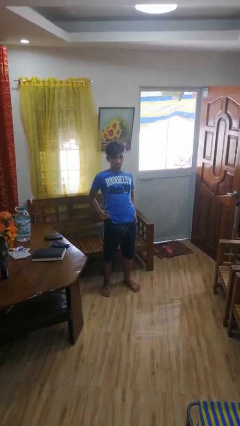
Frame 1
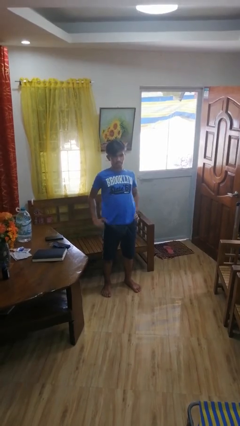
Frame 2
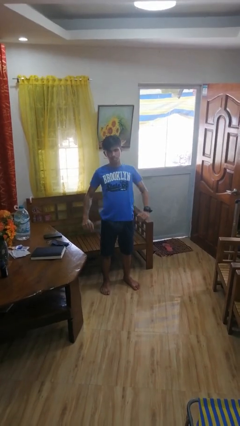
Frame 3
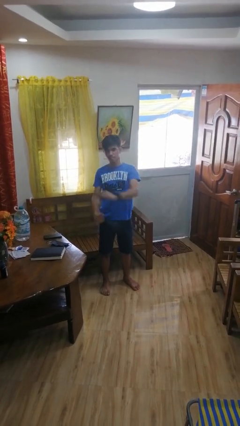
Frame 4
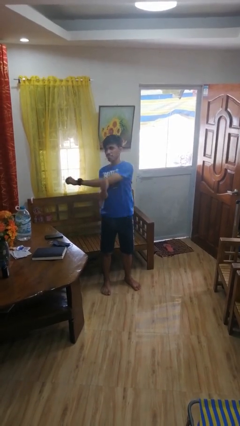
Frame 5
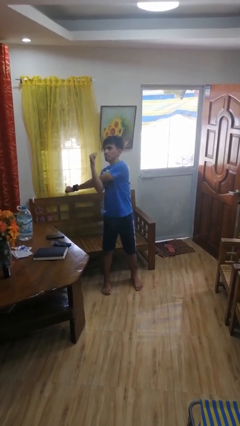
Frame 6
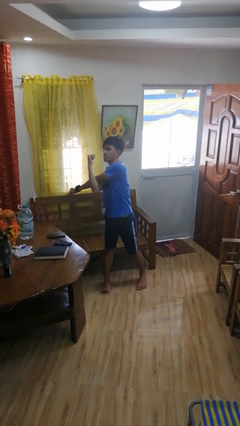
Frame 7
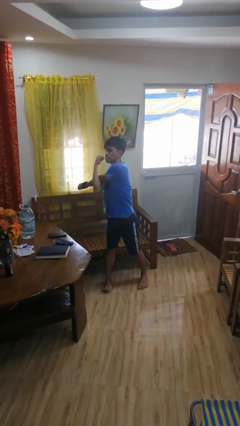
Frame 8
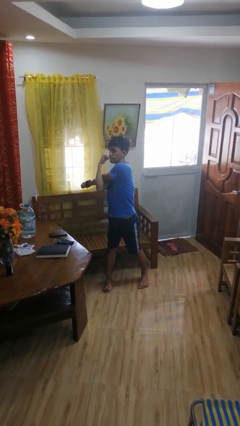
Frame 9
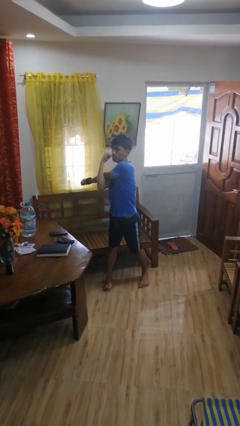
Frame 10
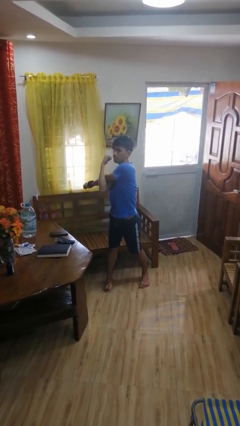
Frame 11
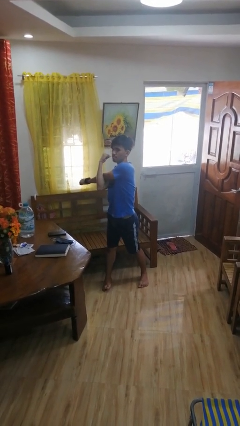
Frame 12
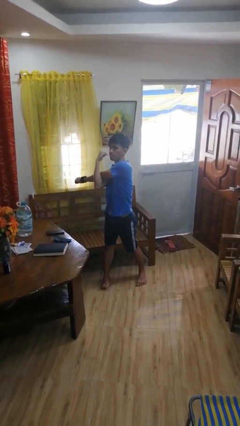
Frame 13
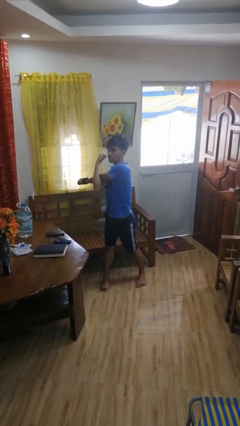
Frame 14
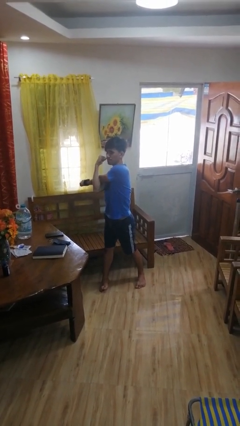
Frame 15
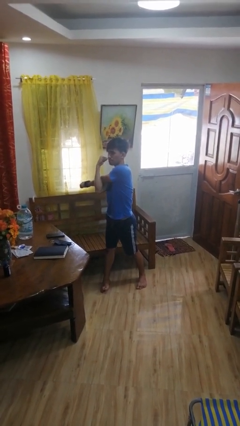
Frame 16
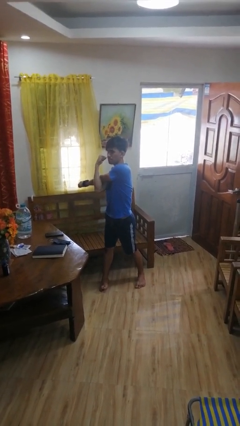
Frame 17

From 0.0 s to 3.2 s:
person stretches arms to side

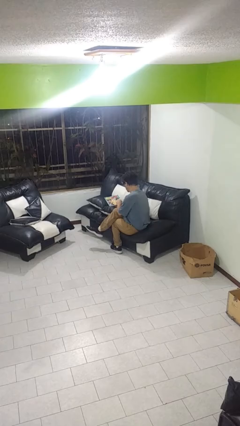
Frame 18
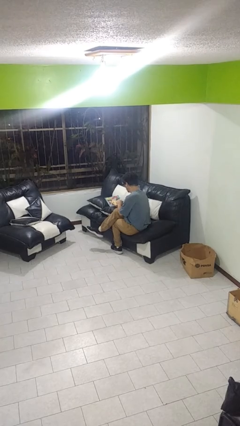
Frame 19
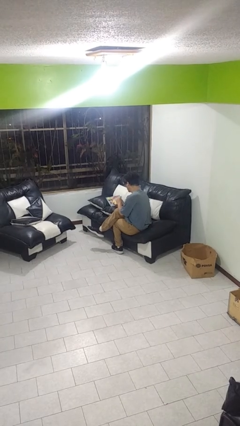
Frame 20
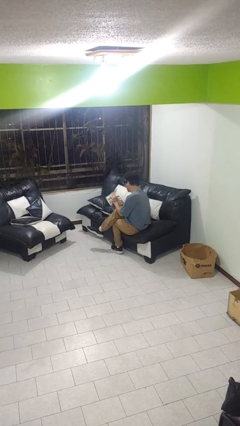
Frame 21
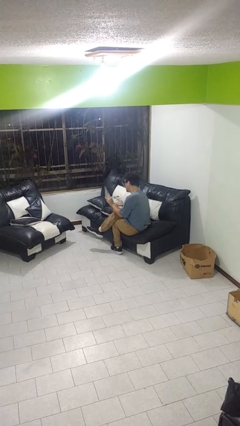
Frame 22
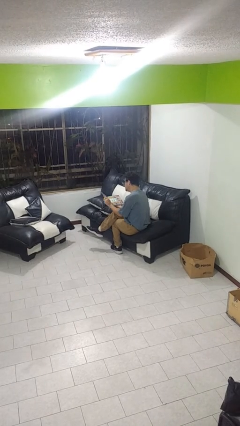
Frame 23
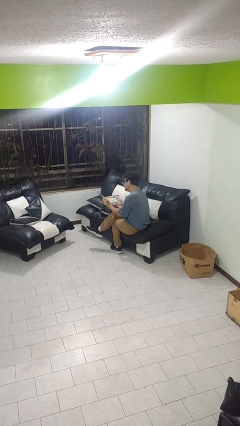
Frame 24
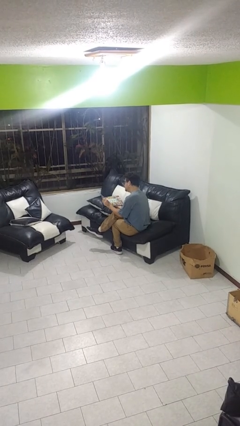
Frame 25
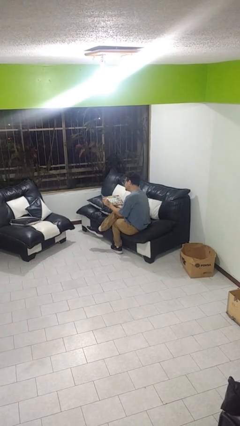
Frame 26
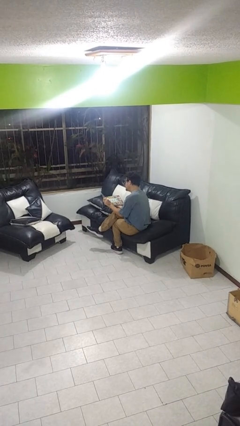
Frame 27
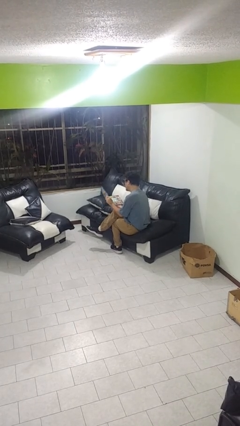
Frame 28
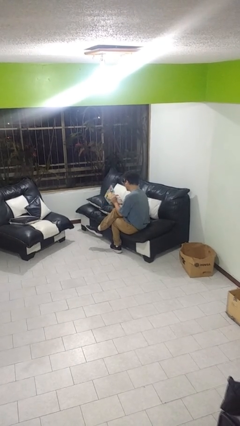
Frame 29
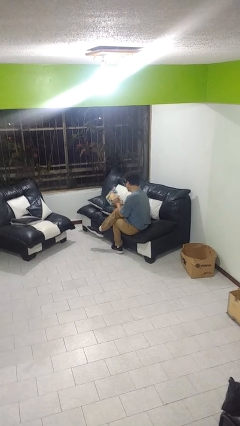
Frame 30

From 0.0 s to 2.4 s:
person reads magazine

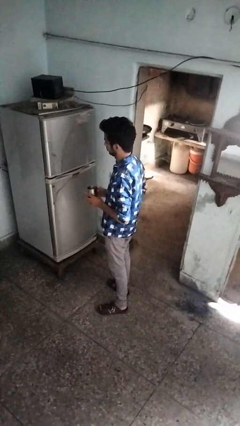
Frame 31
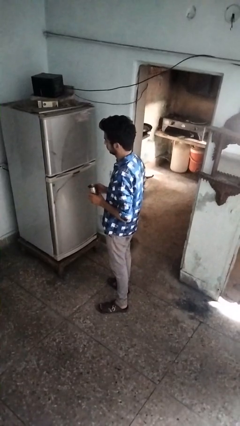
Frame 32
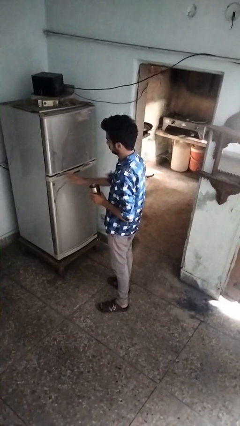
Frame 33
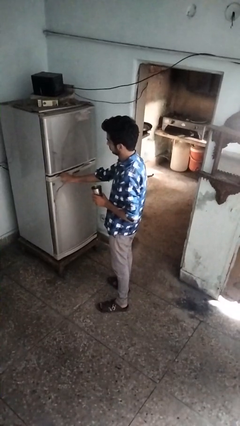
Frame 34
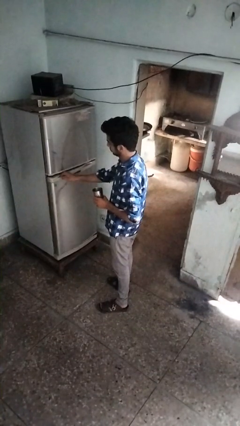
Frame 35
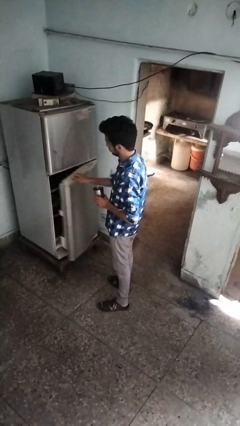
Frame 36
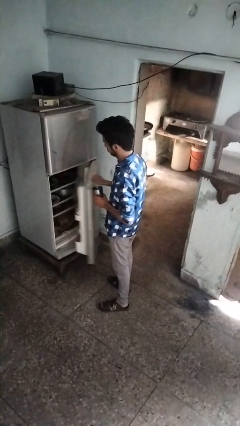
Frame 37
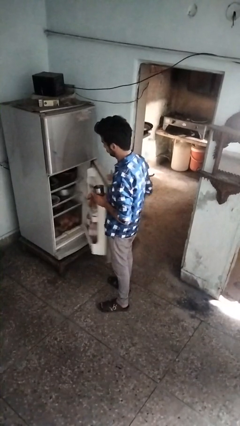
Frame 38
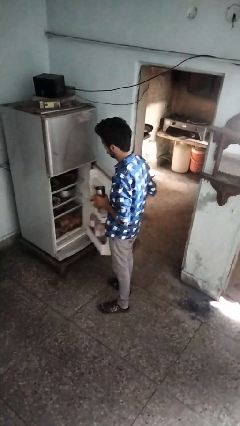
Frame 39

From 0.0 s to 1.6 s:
person opens refrigerator

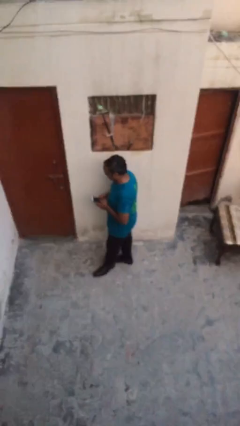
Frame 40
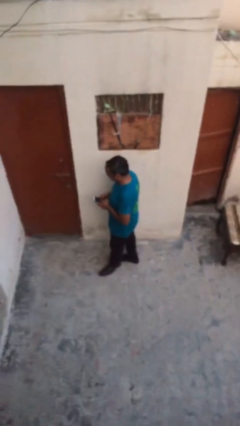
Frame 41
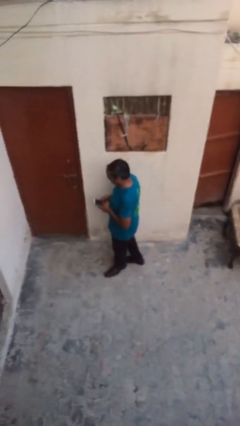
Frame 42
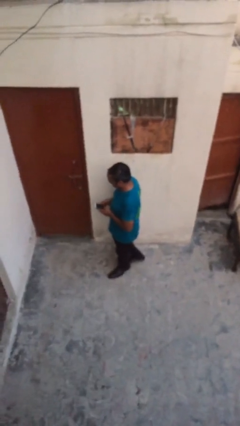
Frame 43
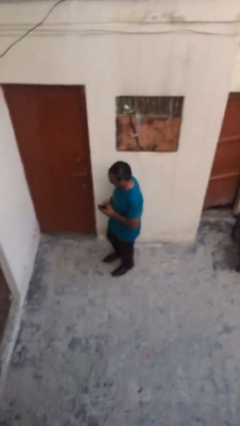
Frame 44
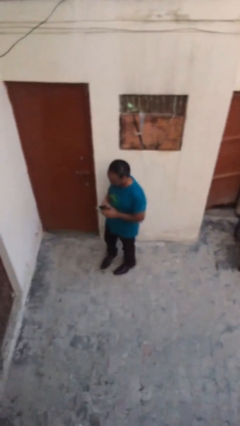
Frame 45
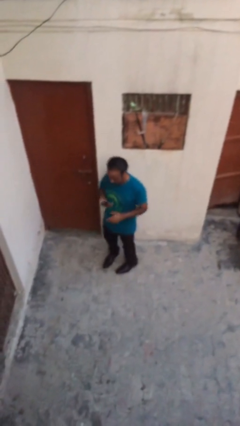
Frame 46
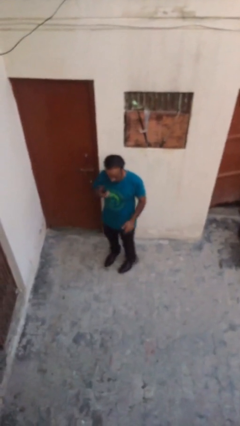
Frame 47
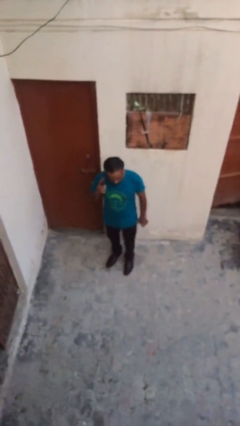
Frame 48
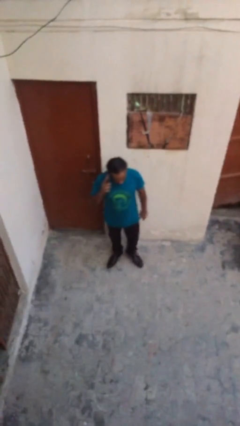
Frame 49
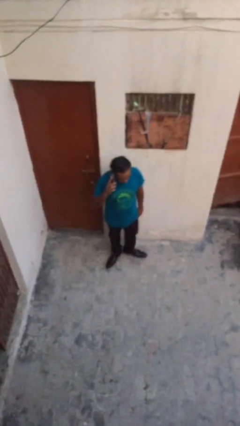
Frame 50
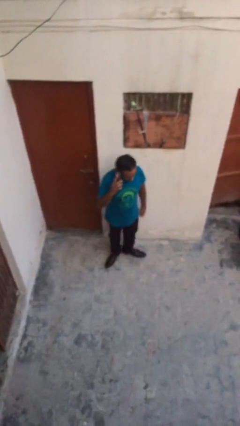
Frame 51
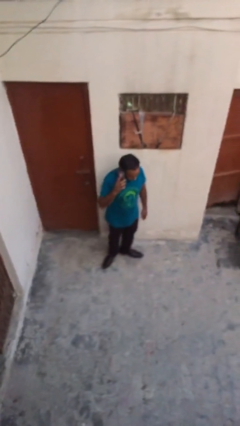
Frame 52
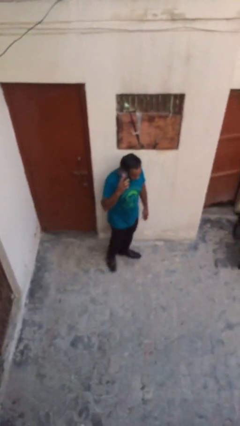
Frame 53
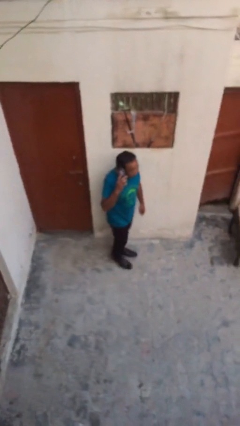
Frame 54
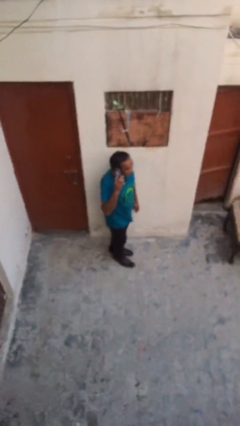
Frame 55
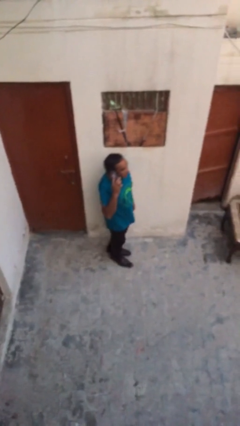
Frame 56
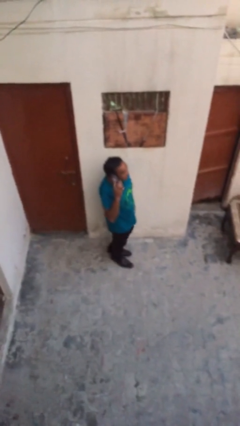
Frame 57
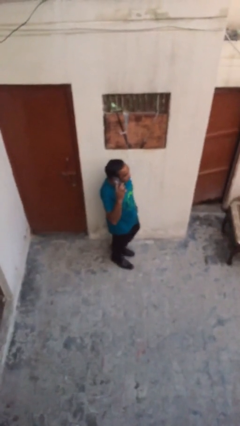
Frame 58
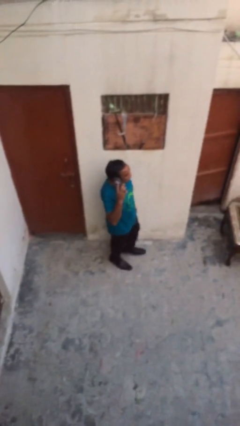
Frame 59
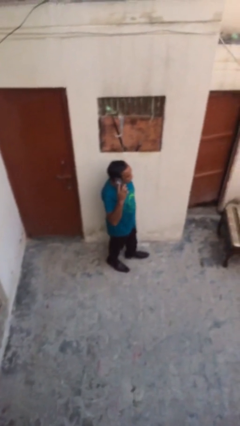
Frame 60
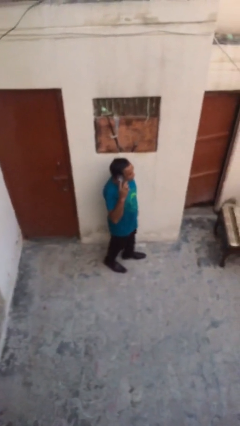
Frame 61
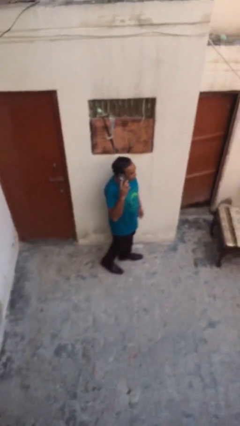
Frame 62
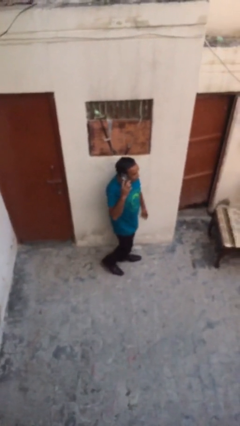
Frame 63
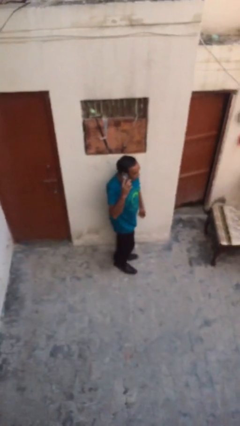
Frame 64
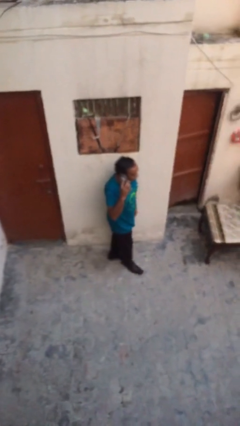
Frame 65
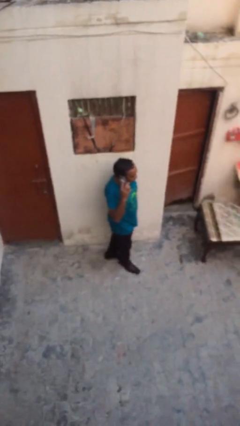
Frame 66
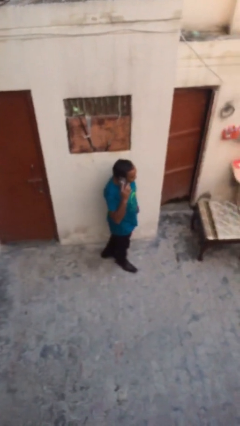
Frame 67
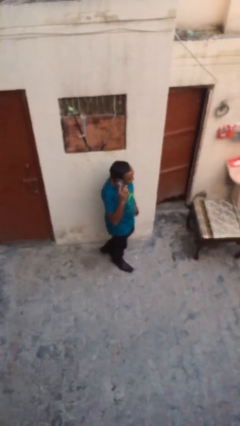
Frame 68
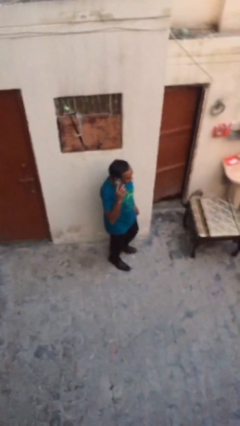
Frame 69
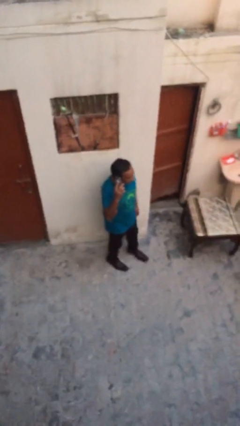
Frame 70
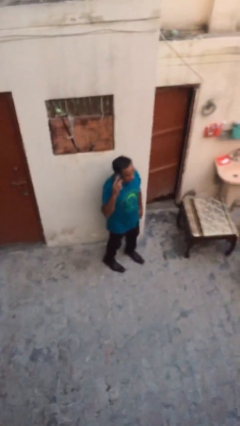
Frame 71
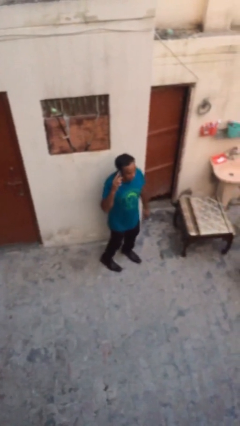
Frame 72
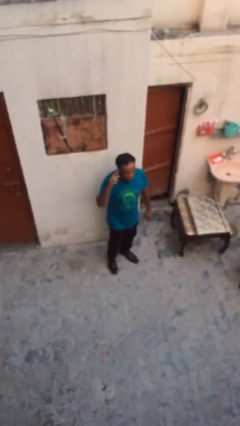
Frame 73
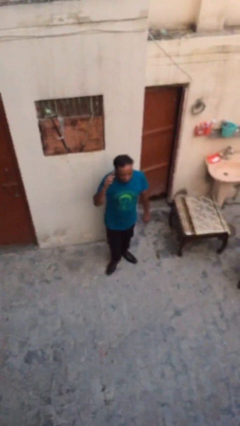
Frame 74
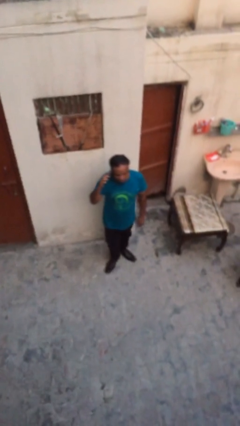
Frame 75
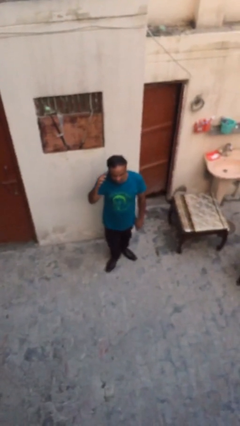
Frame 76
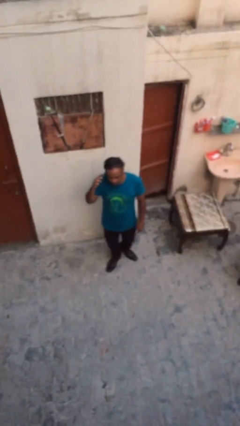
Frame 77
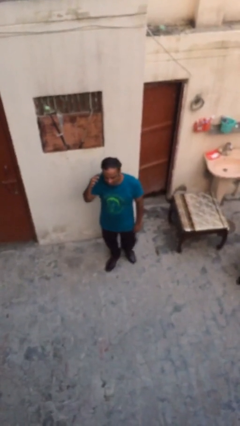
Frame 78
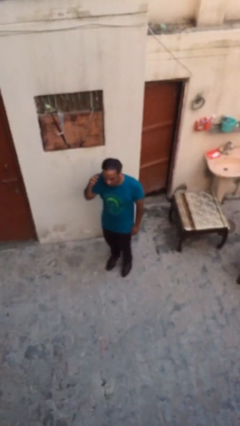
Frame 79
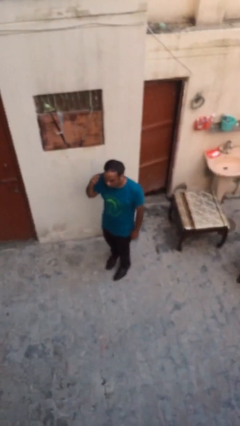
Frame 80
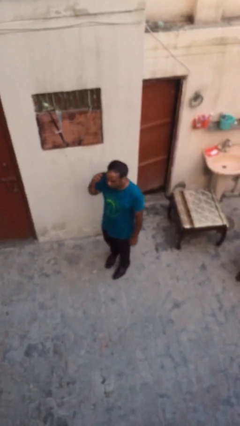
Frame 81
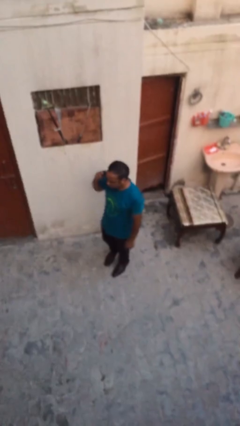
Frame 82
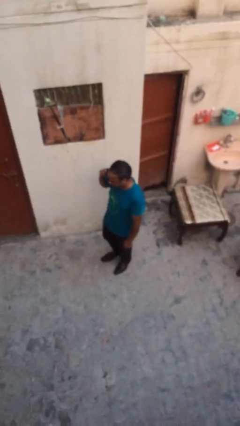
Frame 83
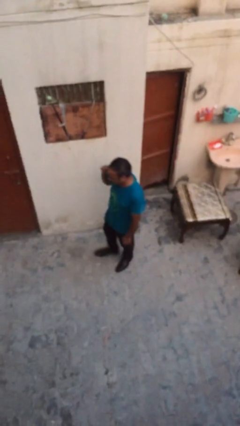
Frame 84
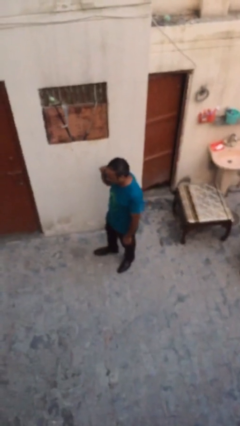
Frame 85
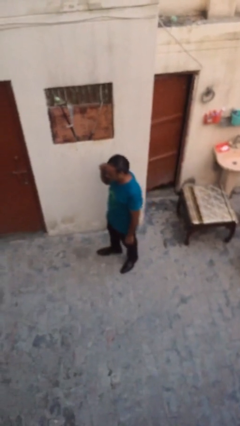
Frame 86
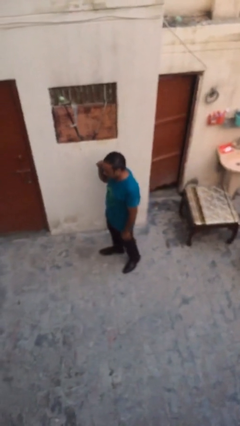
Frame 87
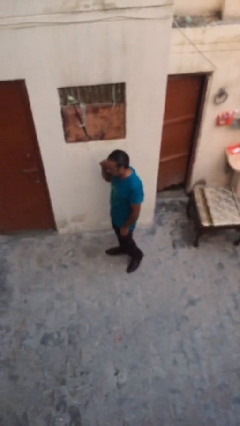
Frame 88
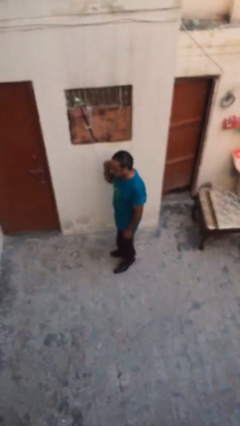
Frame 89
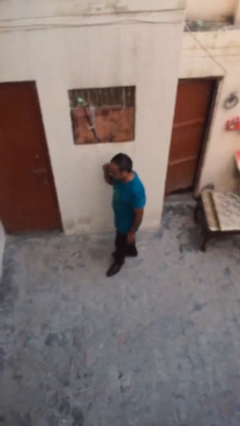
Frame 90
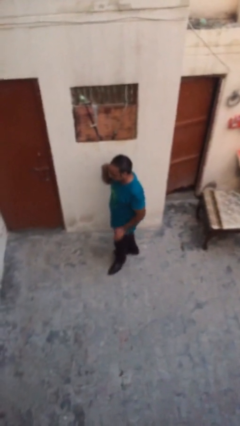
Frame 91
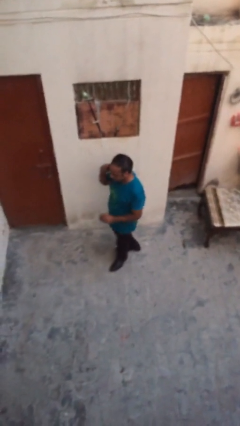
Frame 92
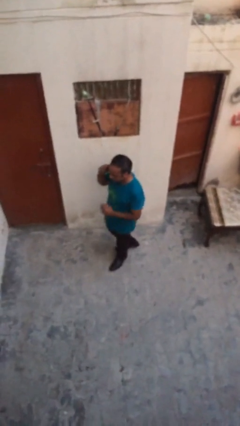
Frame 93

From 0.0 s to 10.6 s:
person talks on phone
